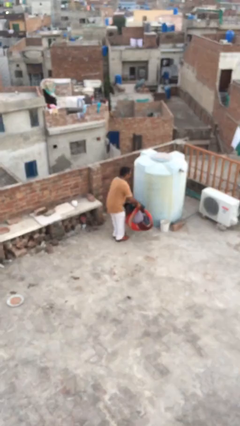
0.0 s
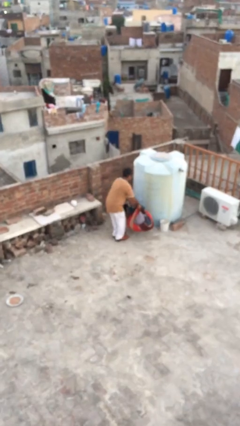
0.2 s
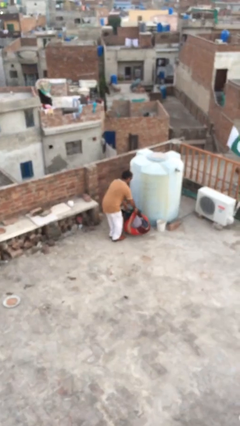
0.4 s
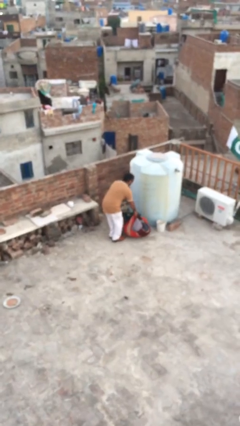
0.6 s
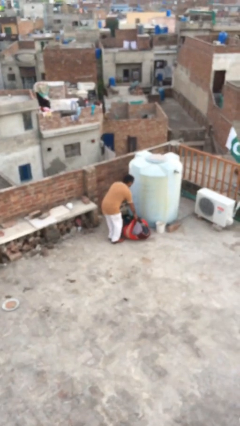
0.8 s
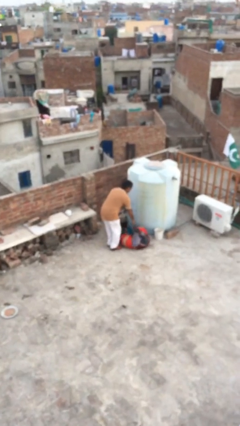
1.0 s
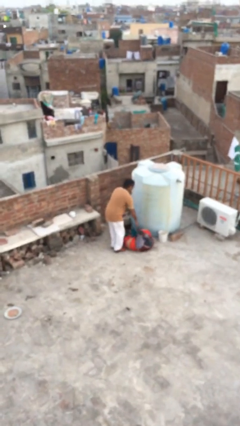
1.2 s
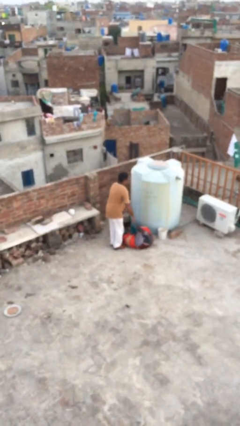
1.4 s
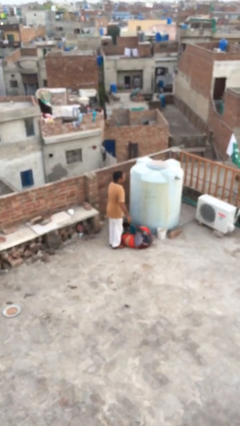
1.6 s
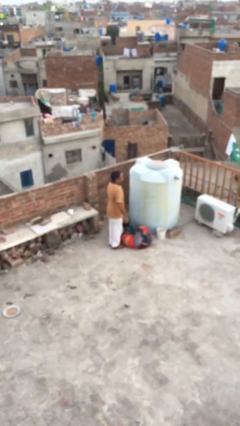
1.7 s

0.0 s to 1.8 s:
person puts down object on floor

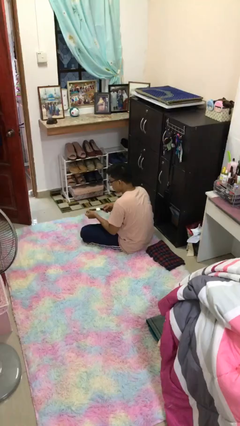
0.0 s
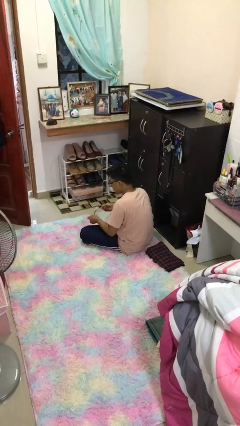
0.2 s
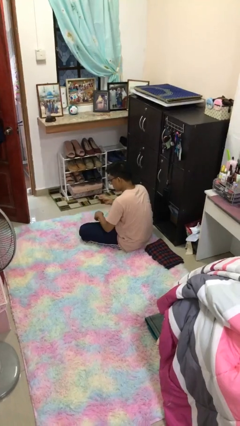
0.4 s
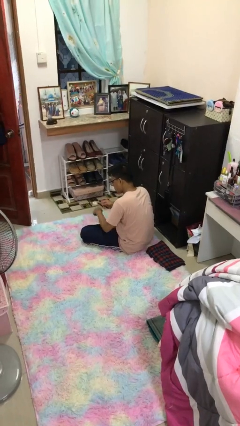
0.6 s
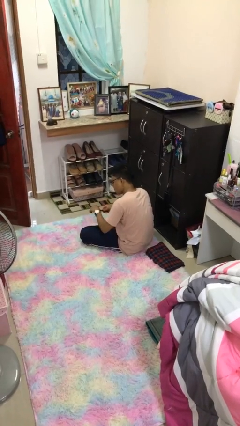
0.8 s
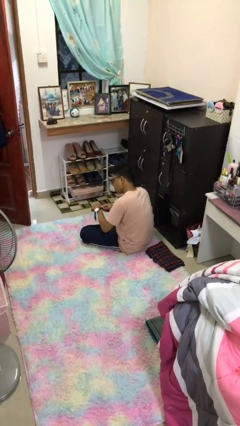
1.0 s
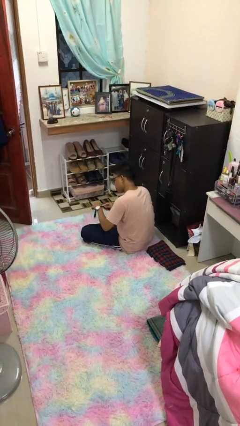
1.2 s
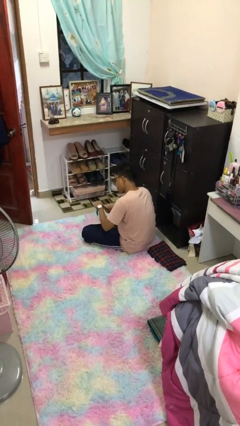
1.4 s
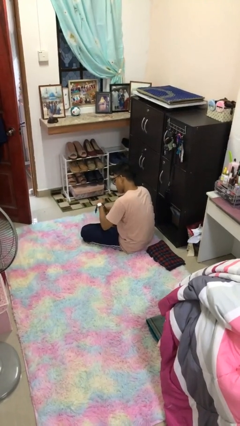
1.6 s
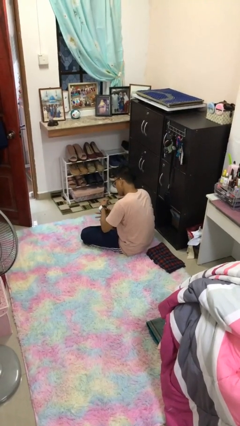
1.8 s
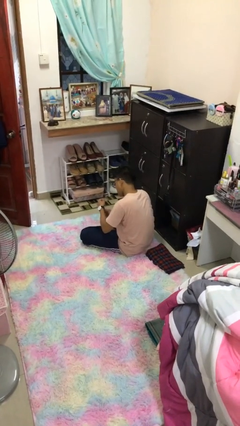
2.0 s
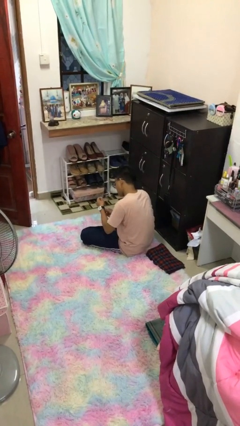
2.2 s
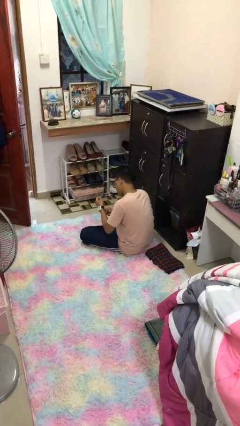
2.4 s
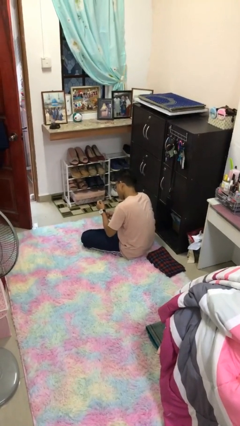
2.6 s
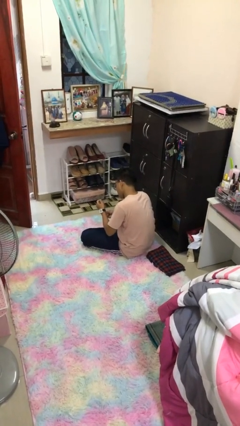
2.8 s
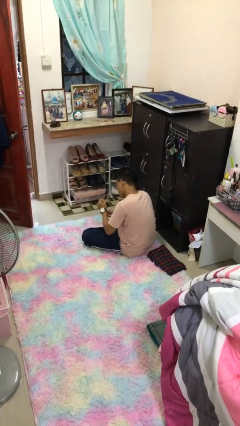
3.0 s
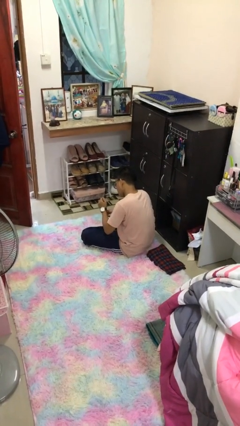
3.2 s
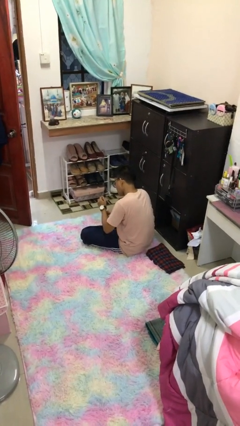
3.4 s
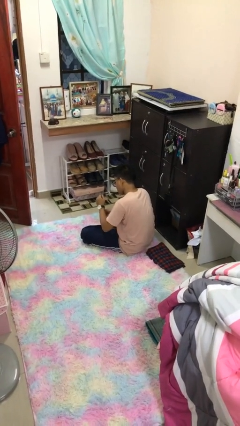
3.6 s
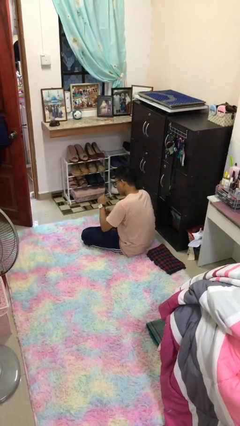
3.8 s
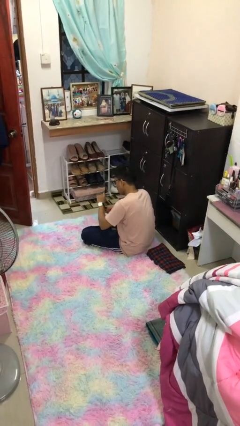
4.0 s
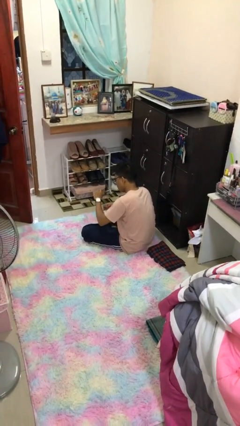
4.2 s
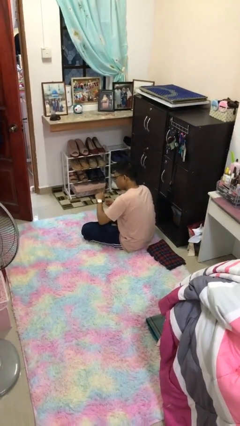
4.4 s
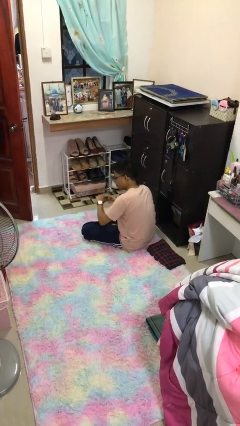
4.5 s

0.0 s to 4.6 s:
person puts on wristwatch

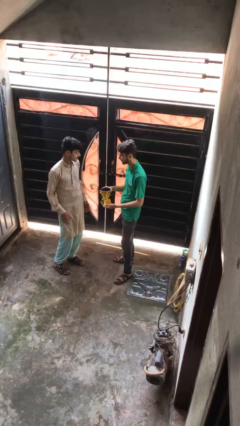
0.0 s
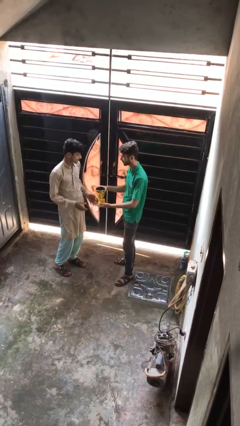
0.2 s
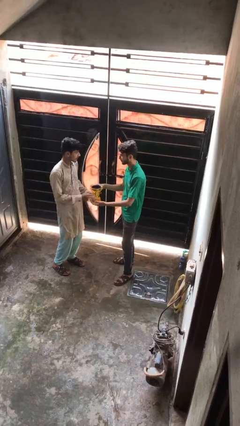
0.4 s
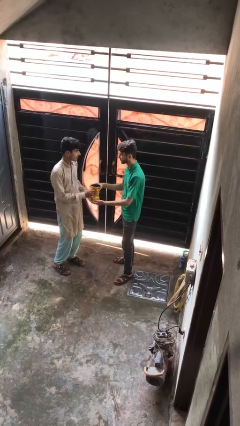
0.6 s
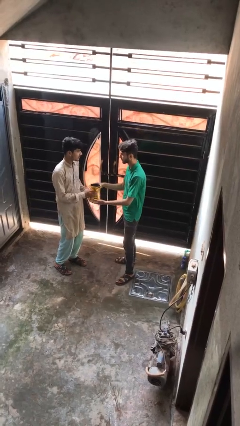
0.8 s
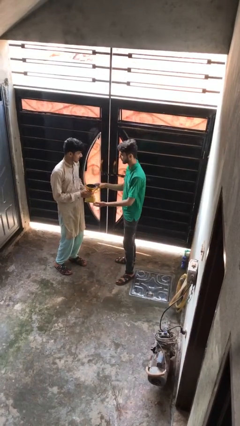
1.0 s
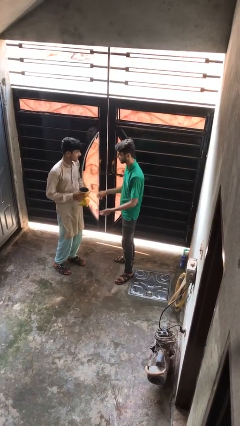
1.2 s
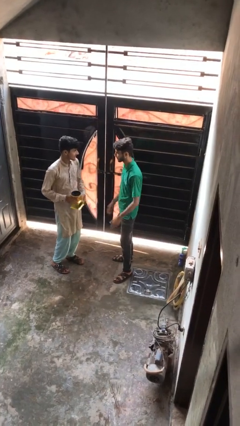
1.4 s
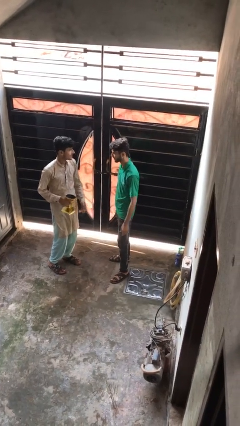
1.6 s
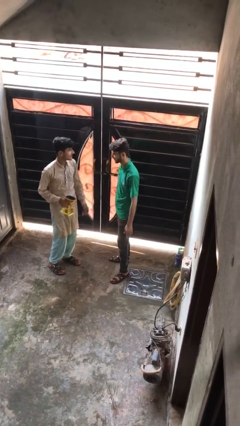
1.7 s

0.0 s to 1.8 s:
person transfers object to person

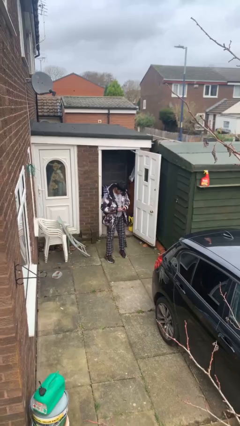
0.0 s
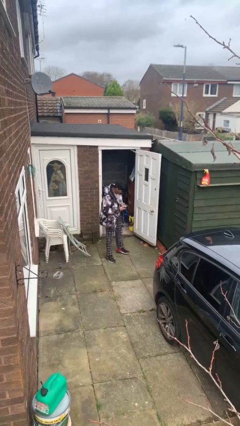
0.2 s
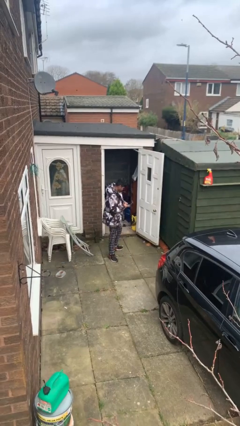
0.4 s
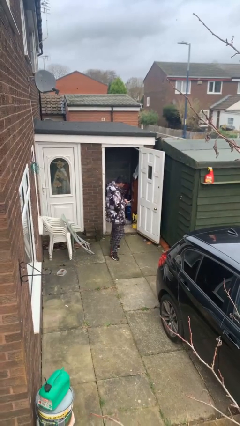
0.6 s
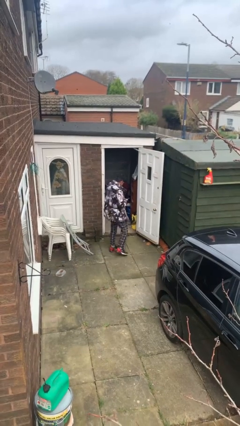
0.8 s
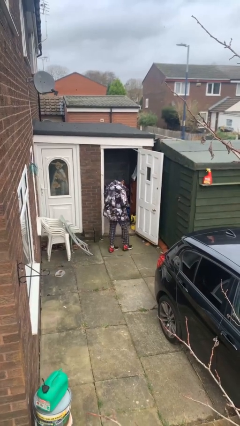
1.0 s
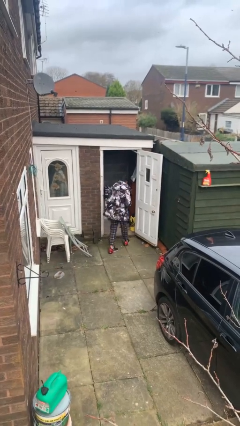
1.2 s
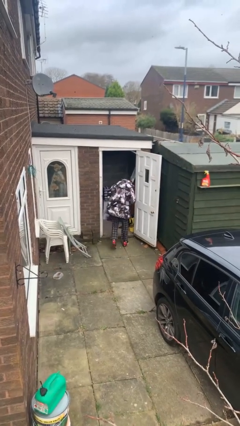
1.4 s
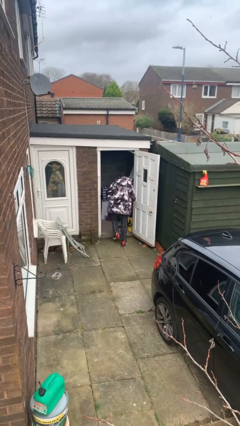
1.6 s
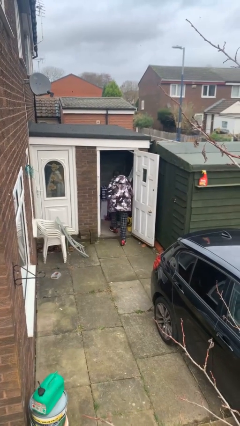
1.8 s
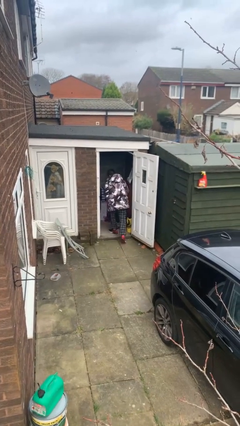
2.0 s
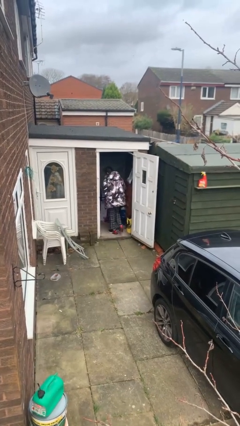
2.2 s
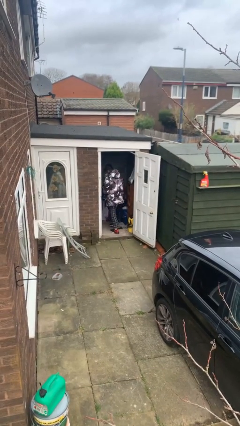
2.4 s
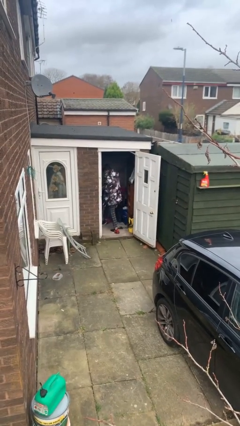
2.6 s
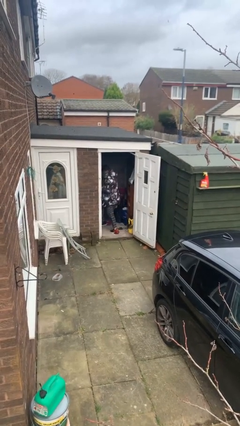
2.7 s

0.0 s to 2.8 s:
person exits scene through structure

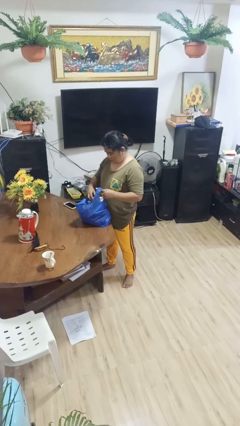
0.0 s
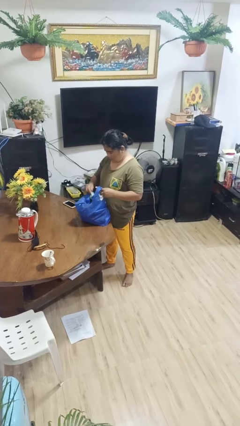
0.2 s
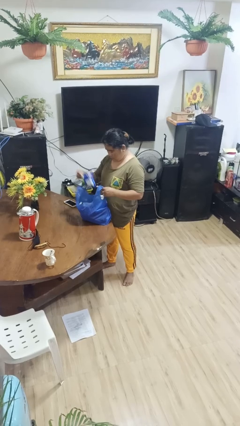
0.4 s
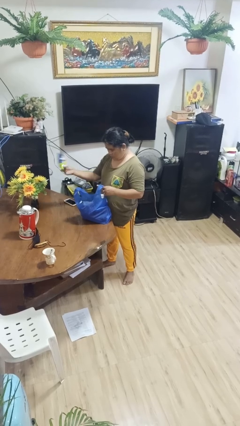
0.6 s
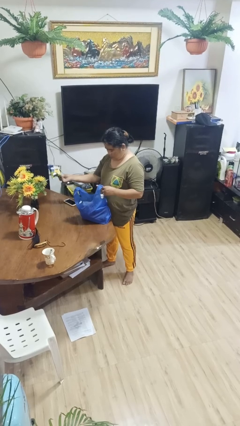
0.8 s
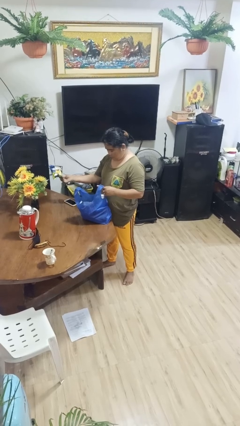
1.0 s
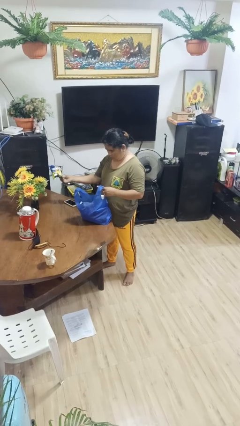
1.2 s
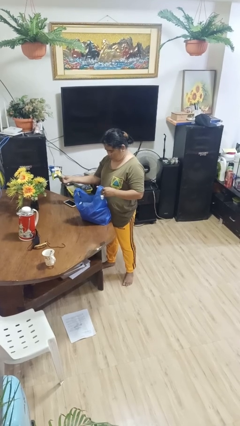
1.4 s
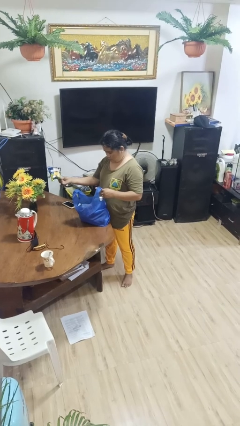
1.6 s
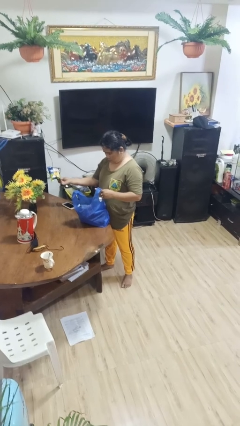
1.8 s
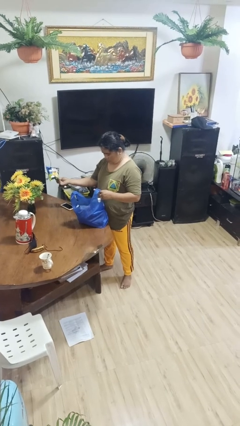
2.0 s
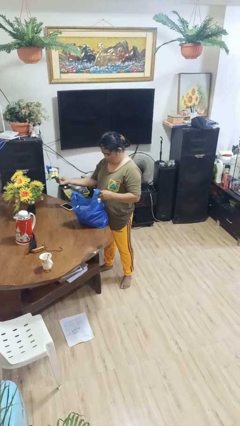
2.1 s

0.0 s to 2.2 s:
person takes object from bag

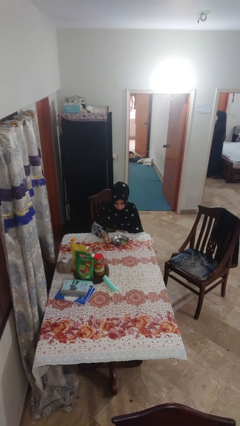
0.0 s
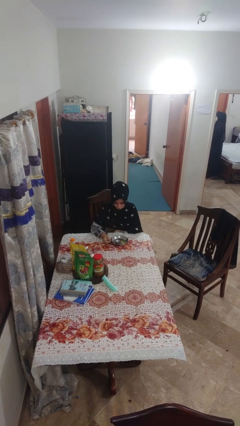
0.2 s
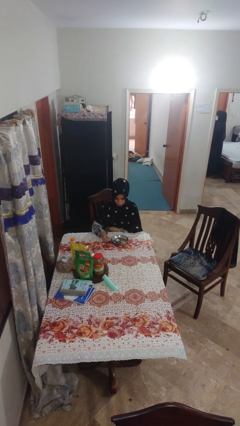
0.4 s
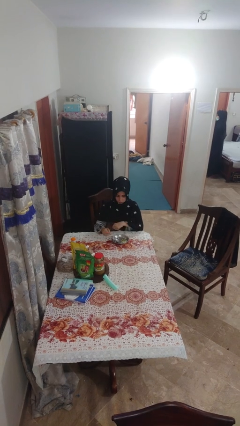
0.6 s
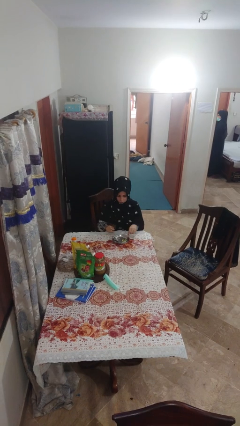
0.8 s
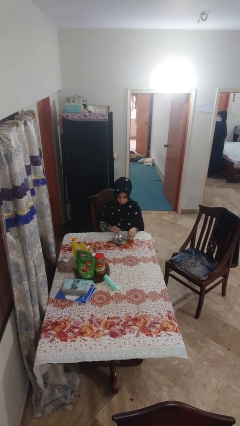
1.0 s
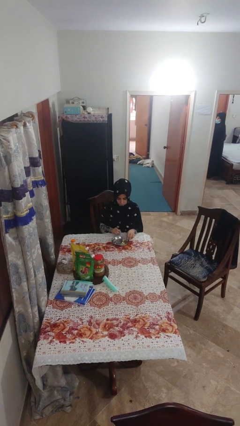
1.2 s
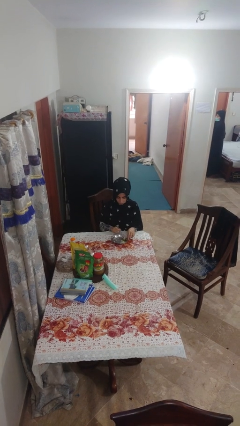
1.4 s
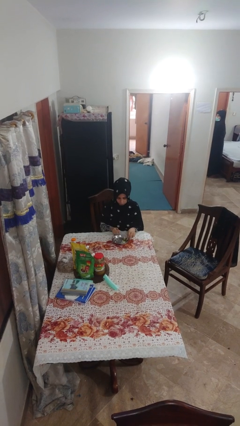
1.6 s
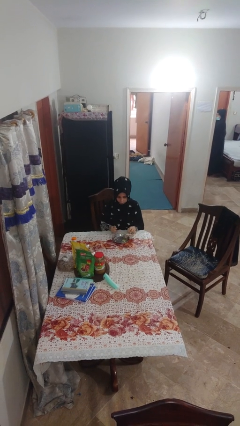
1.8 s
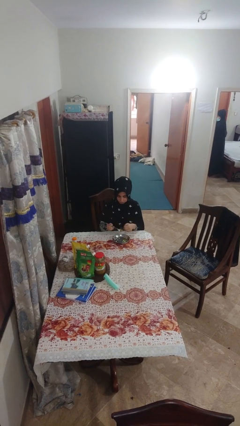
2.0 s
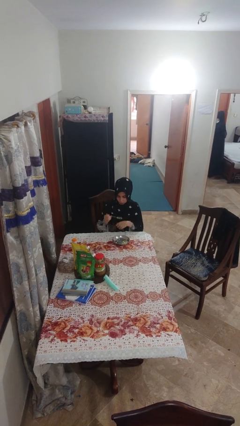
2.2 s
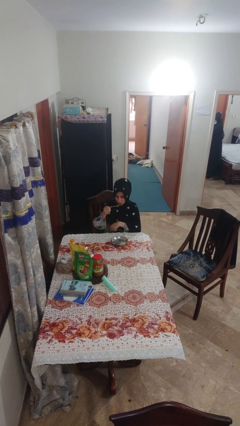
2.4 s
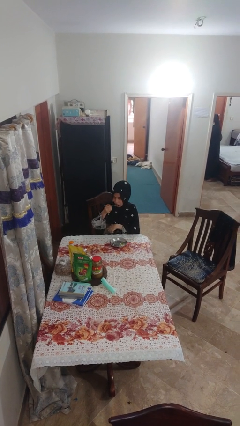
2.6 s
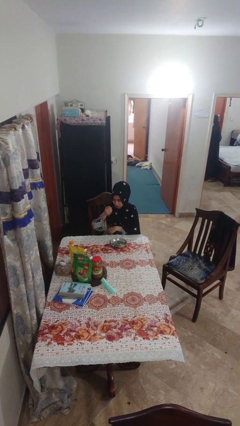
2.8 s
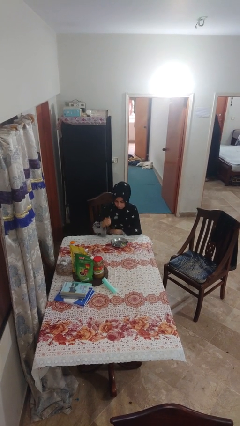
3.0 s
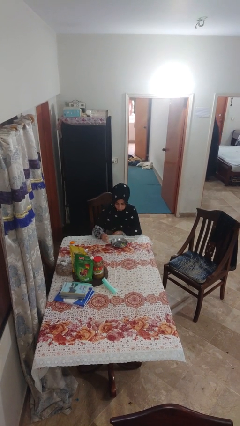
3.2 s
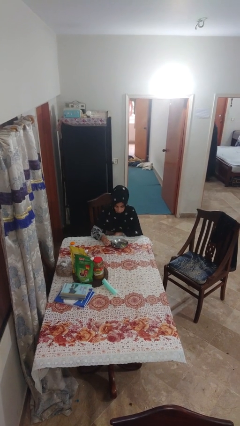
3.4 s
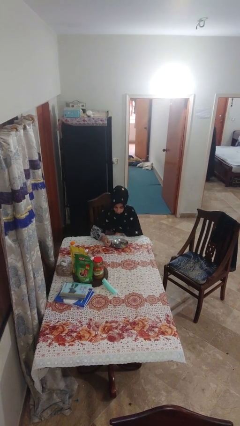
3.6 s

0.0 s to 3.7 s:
person eats with utensil

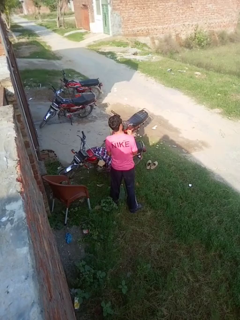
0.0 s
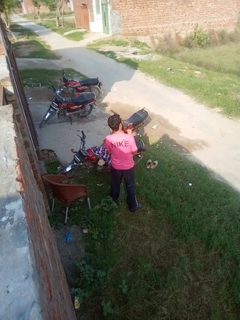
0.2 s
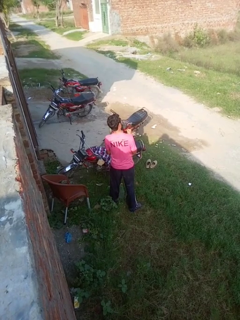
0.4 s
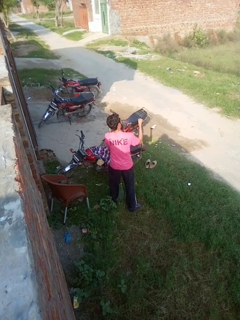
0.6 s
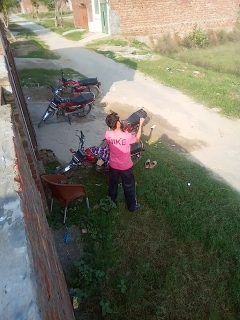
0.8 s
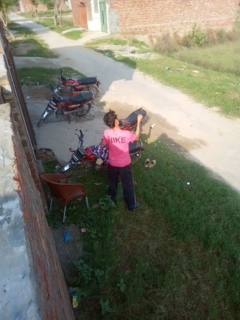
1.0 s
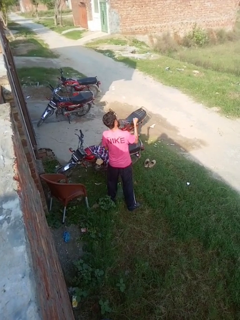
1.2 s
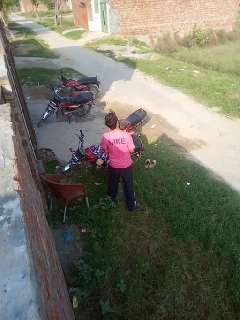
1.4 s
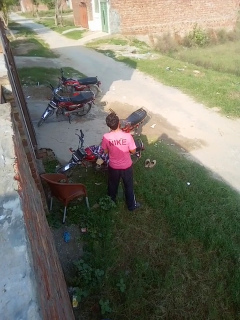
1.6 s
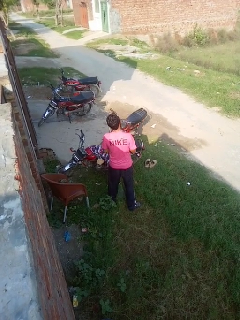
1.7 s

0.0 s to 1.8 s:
person punches
